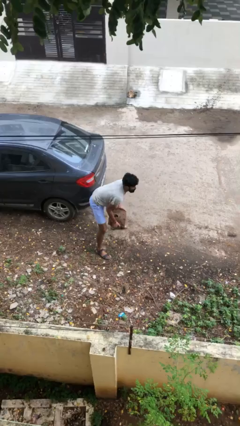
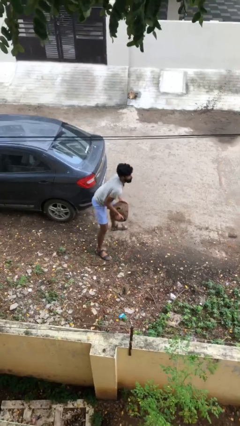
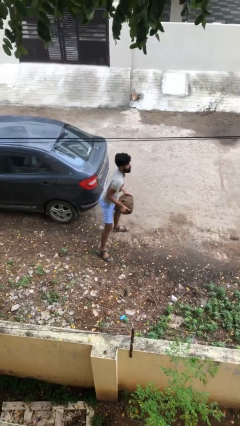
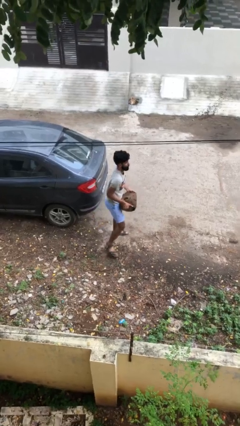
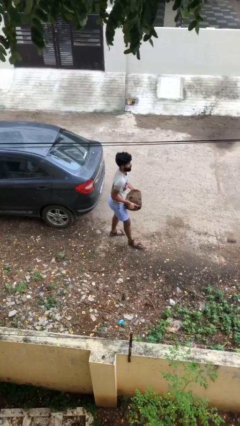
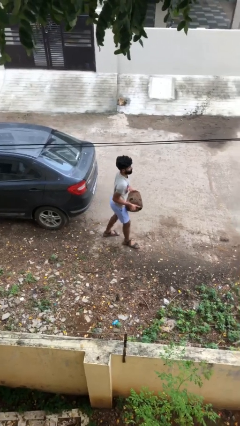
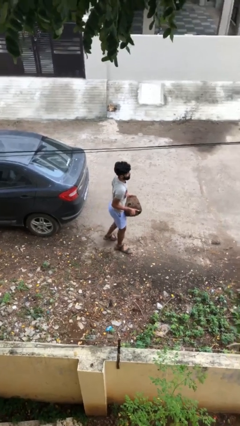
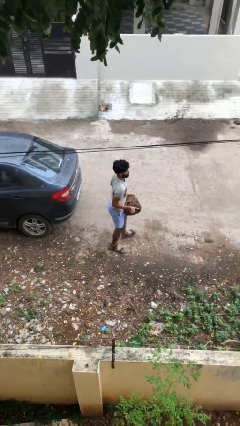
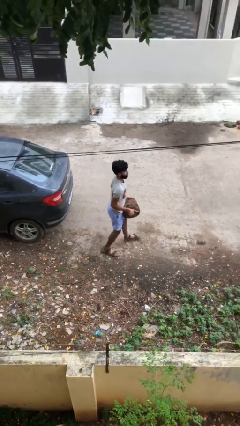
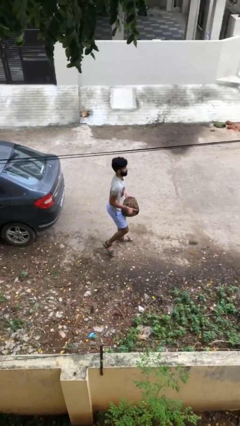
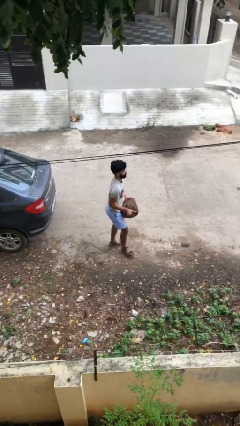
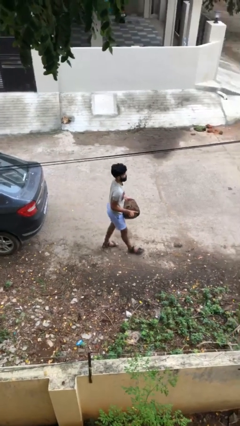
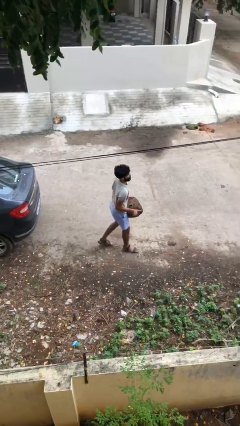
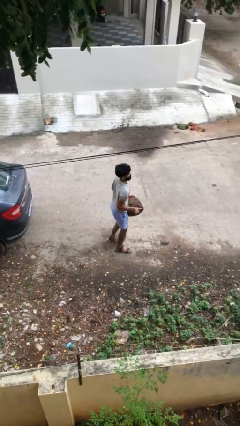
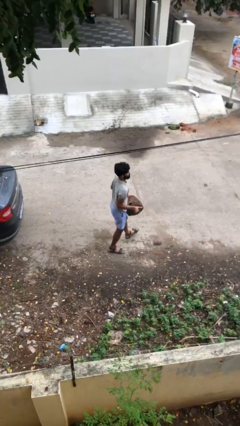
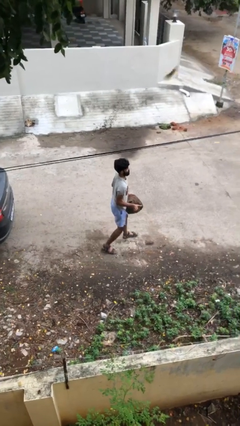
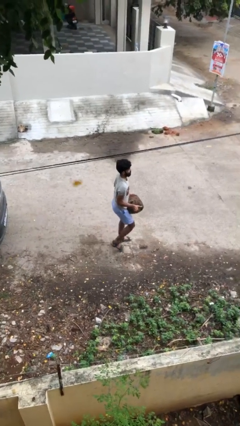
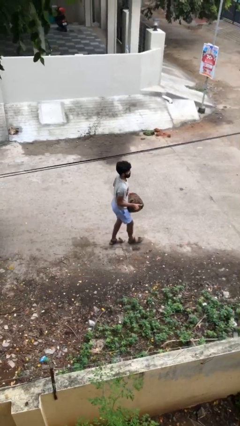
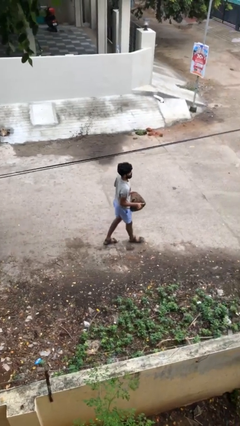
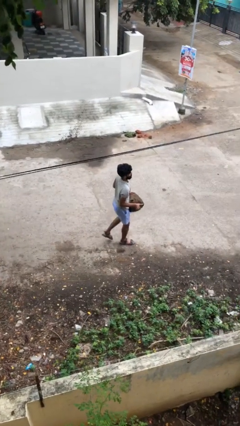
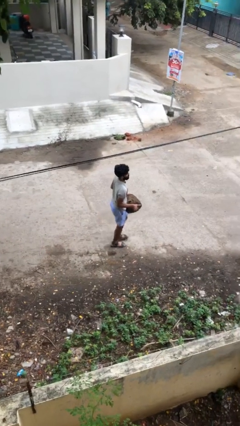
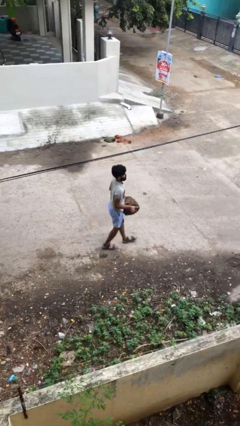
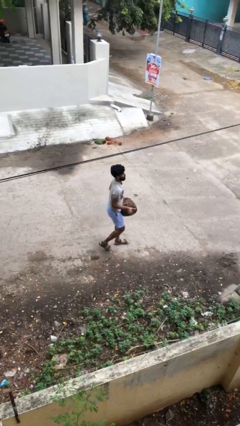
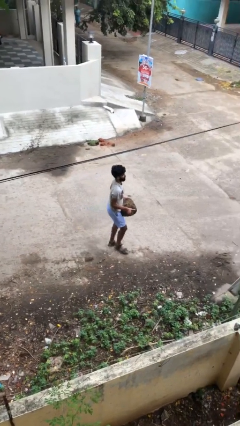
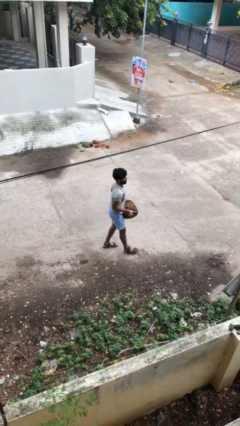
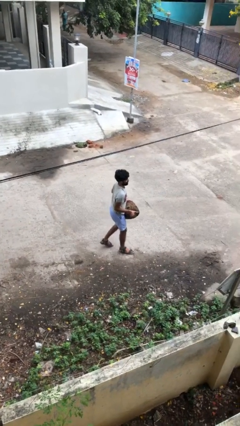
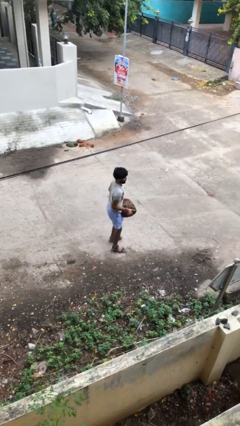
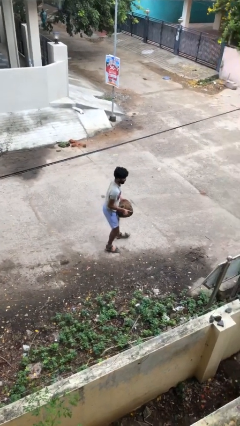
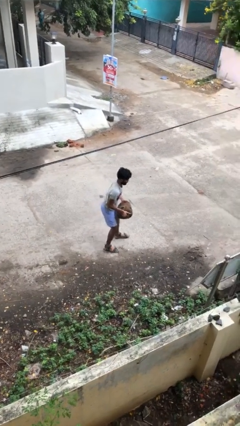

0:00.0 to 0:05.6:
person carries heavy object

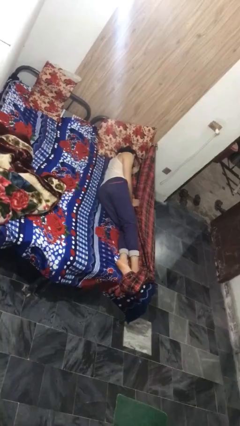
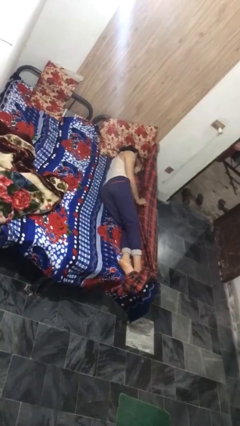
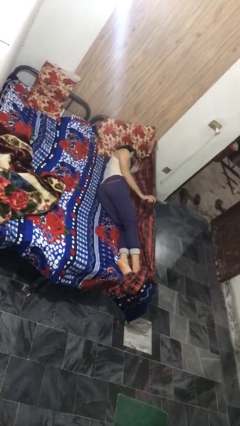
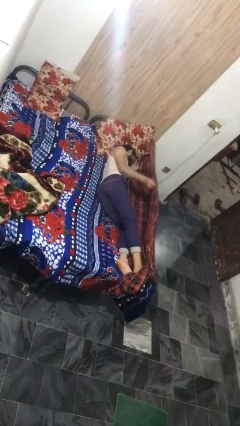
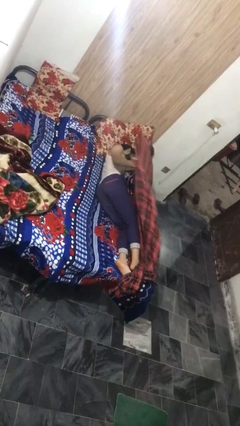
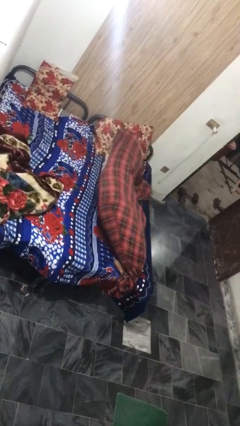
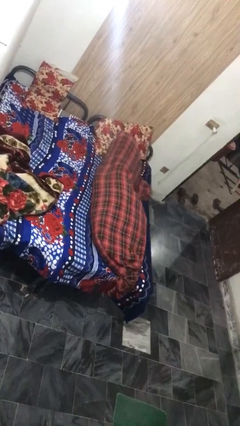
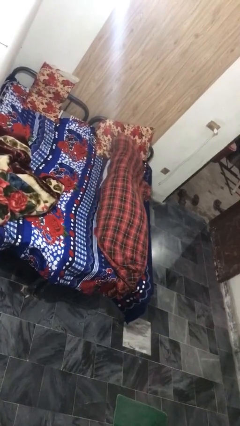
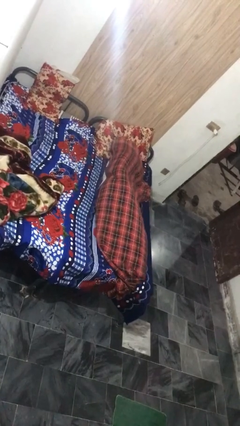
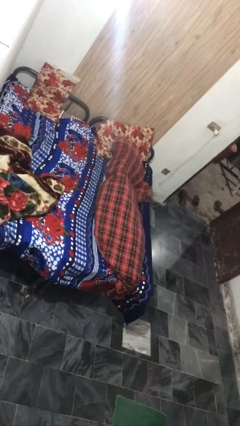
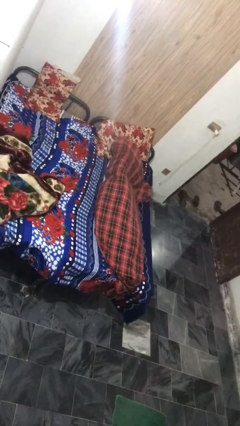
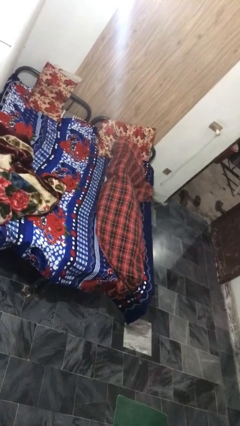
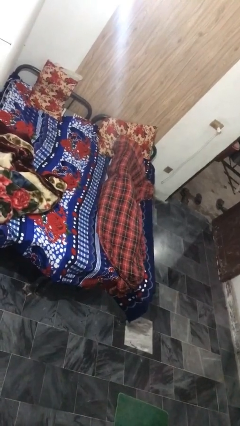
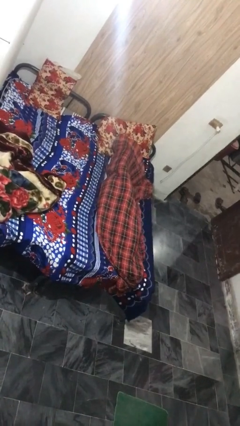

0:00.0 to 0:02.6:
person covers with bedsheets

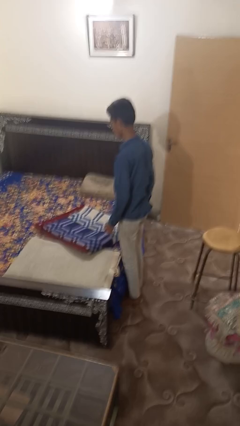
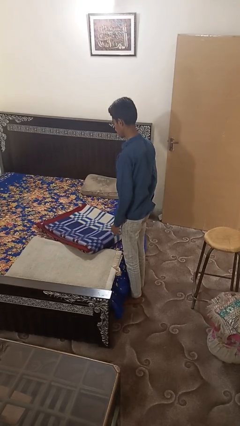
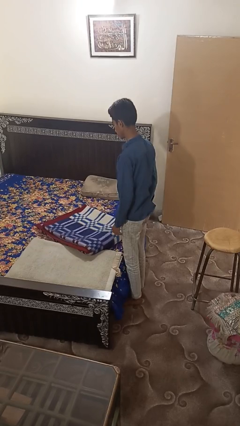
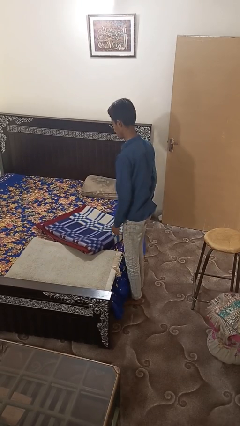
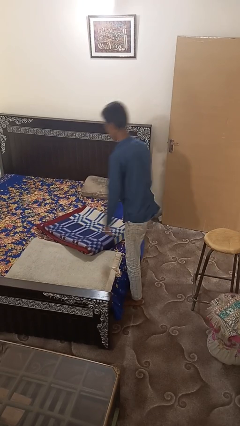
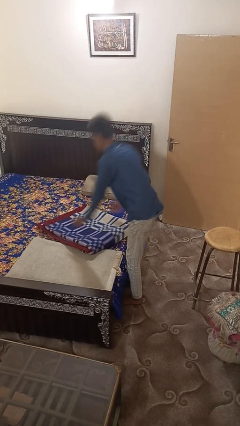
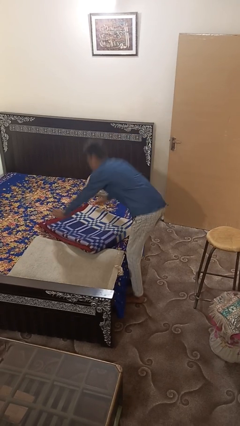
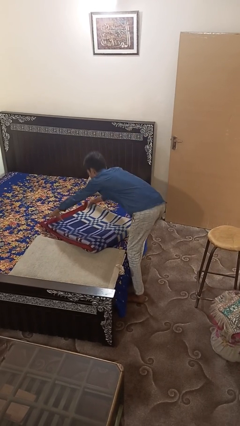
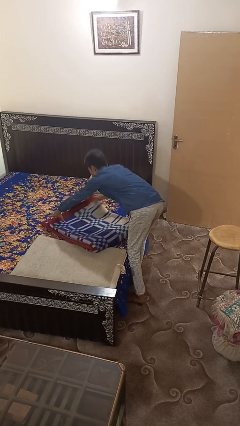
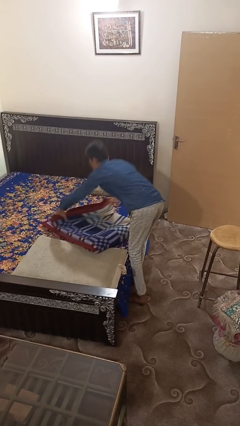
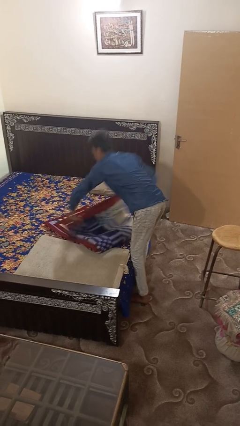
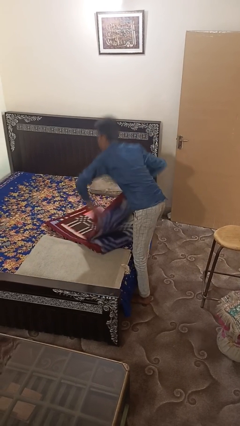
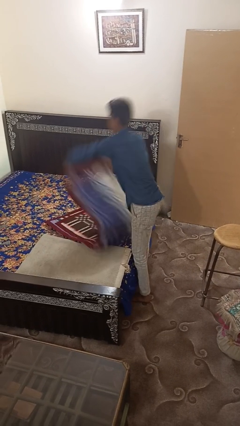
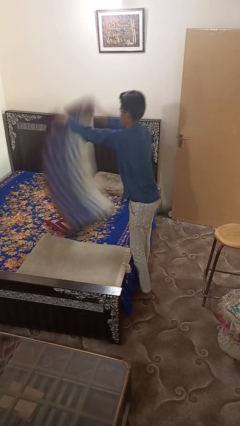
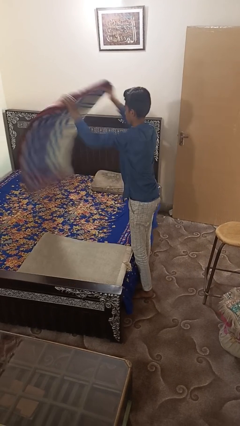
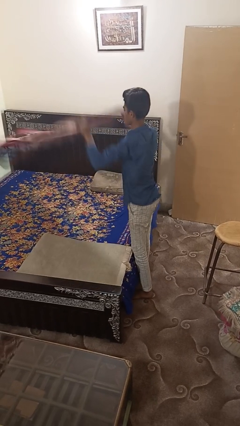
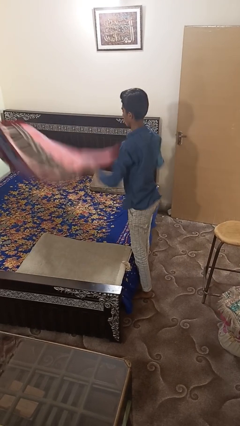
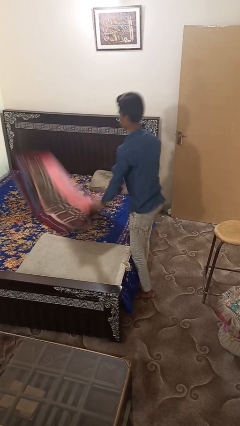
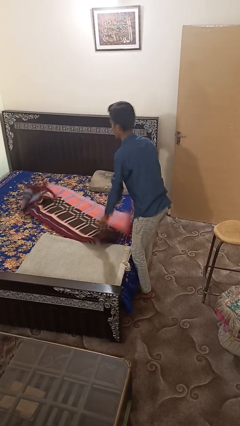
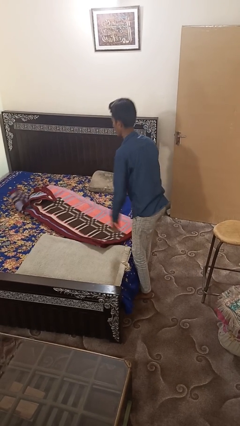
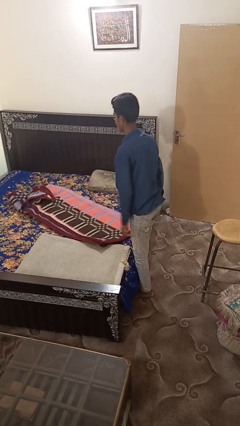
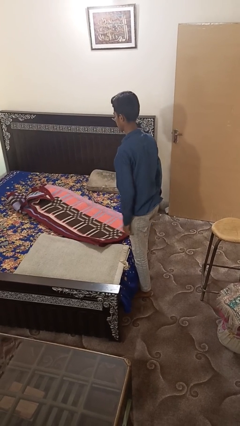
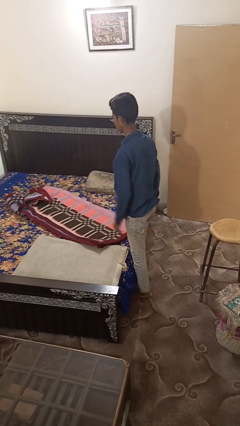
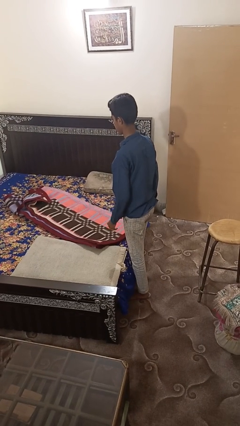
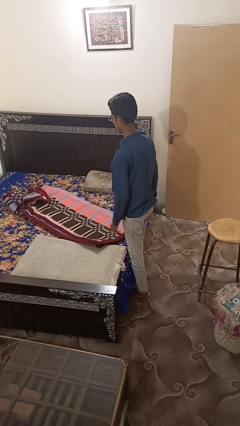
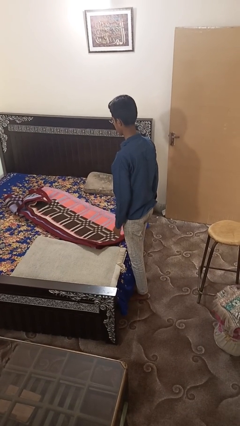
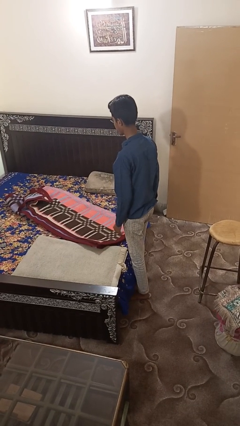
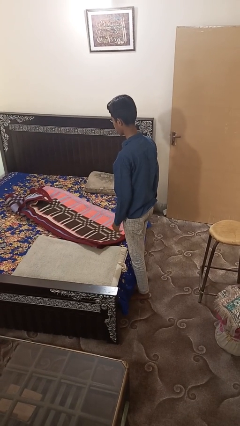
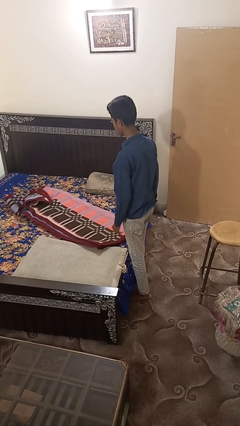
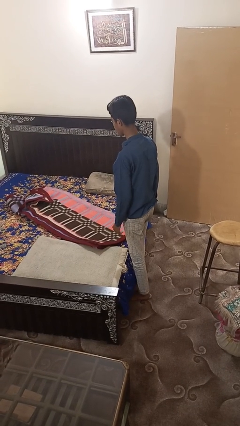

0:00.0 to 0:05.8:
person unfolds blanket

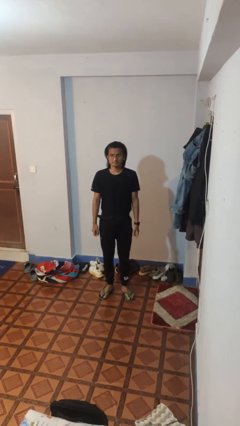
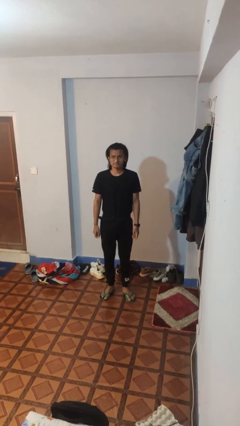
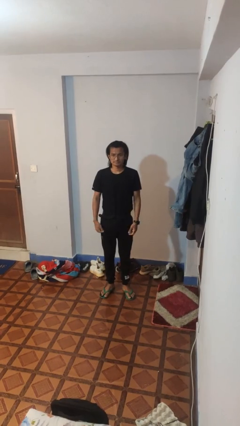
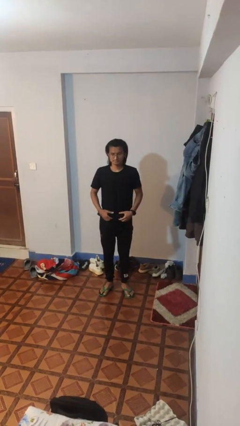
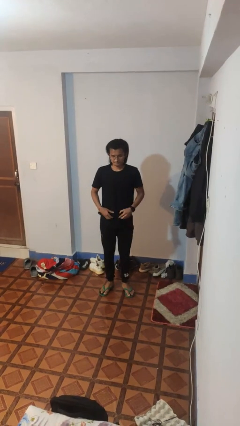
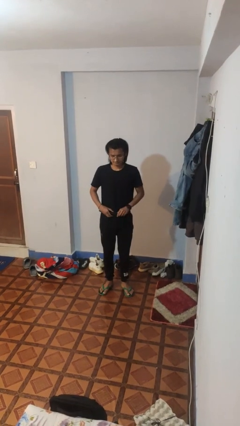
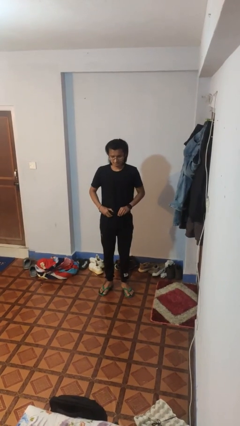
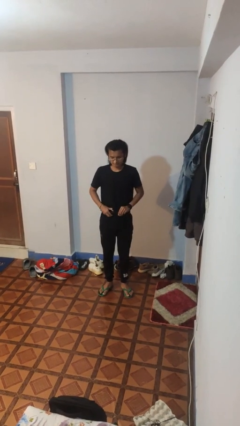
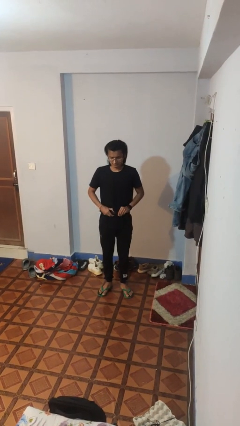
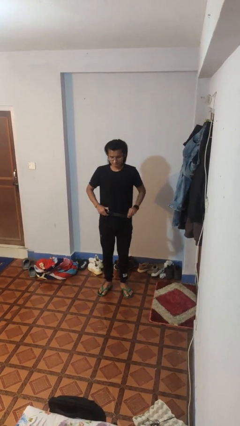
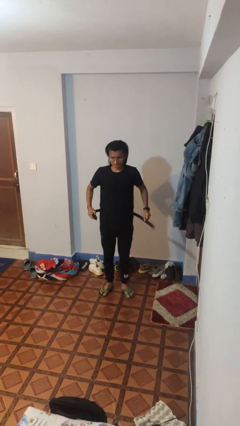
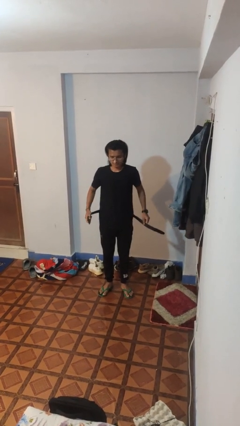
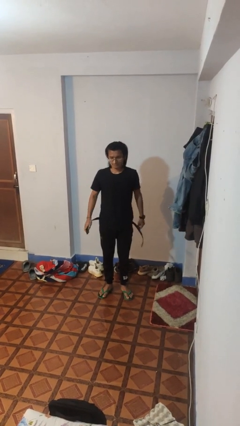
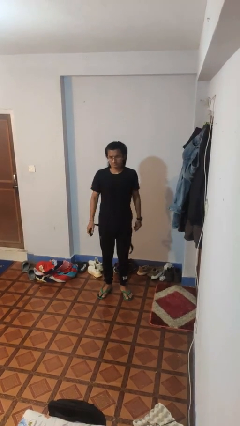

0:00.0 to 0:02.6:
person takes off belt

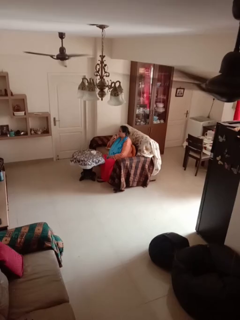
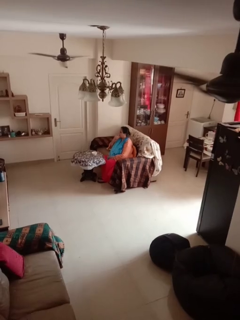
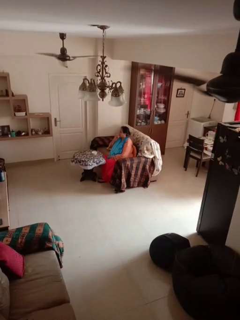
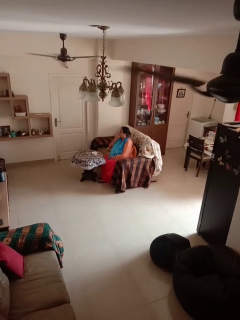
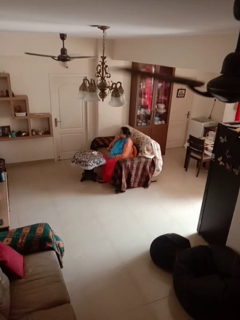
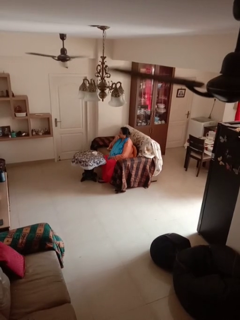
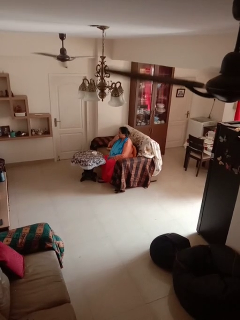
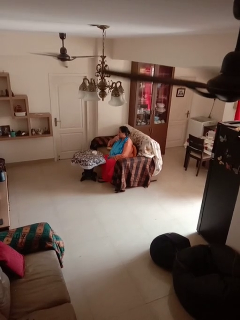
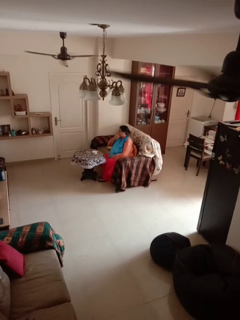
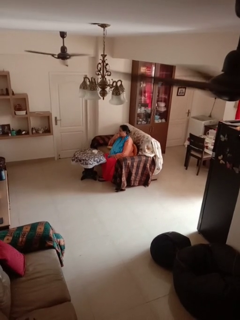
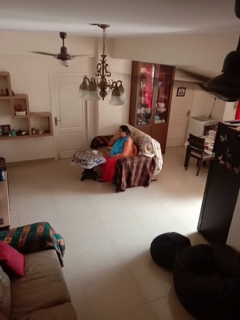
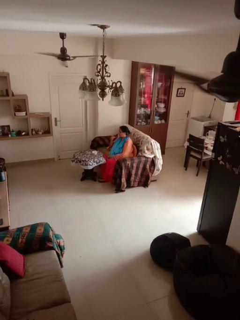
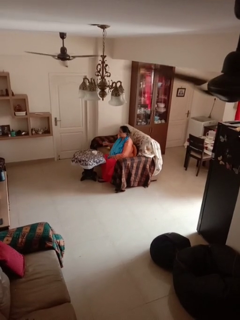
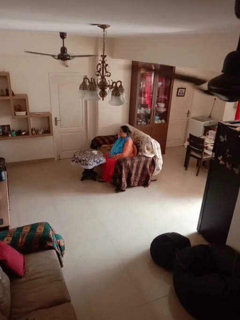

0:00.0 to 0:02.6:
person licks fingers
